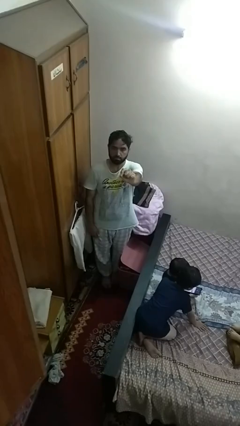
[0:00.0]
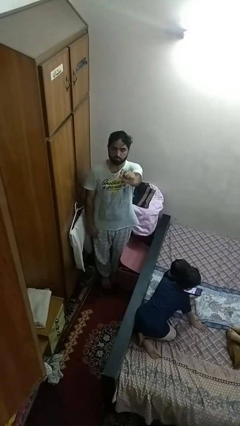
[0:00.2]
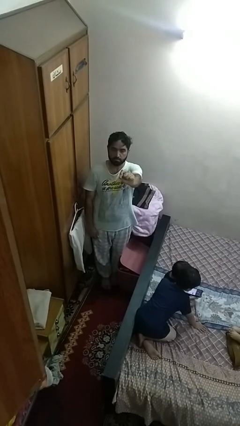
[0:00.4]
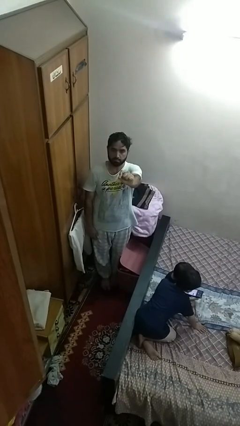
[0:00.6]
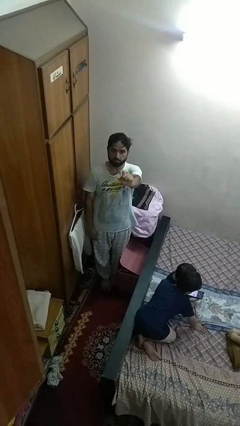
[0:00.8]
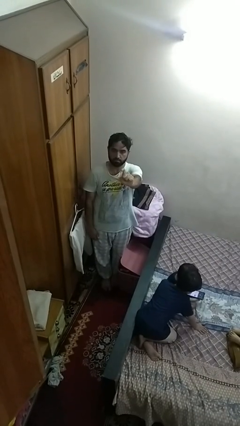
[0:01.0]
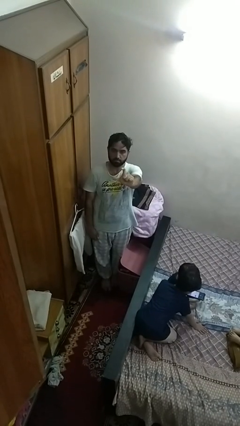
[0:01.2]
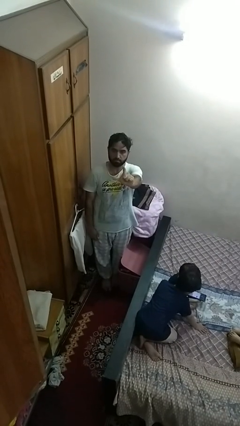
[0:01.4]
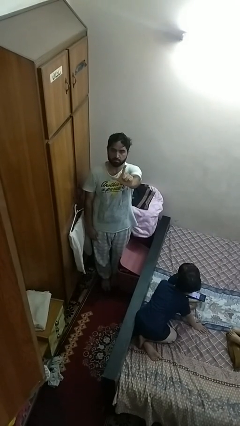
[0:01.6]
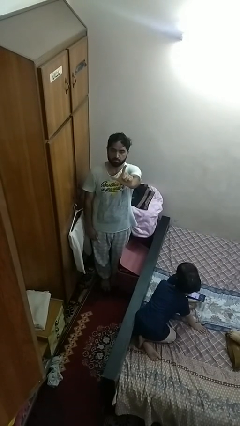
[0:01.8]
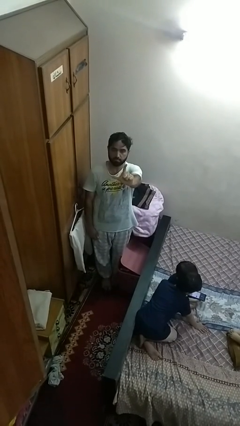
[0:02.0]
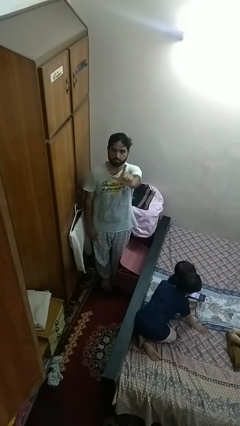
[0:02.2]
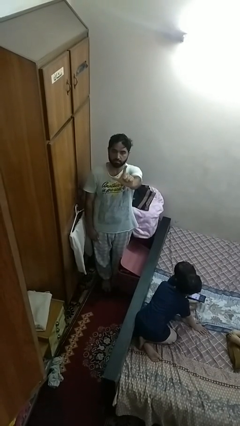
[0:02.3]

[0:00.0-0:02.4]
person gestures zoom out

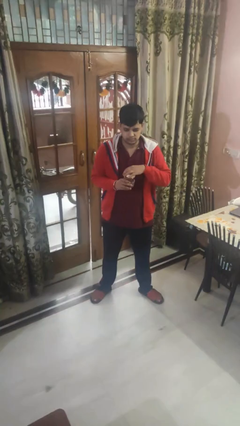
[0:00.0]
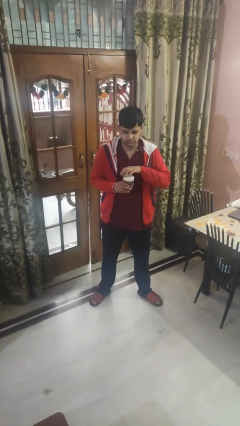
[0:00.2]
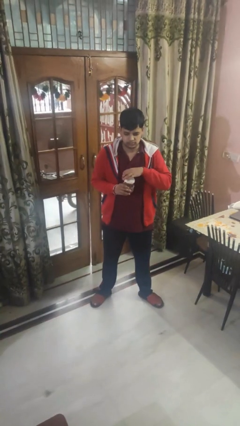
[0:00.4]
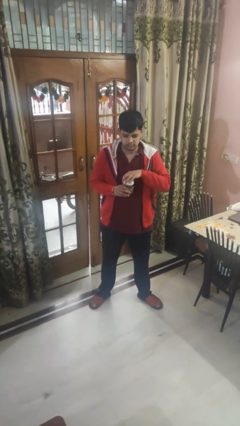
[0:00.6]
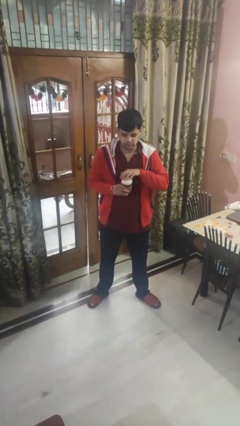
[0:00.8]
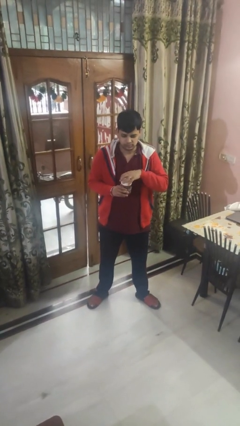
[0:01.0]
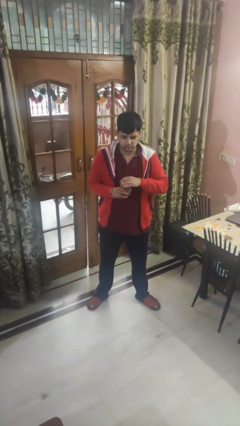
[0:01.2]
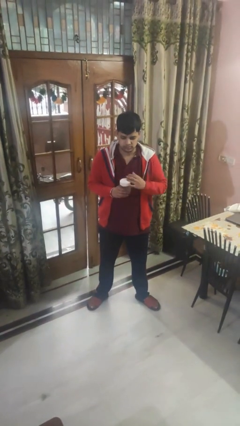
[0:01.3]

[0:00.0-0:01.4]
person closes jar

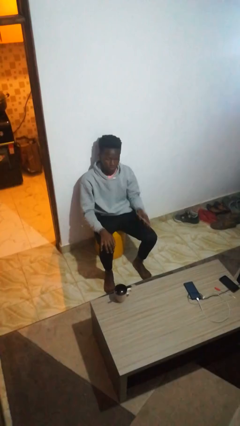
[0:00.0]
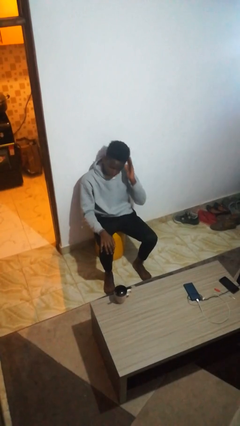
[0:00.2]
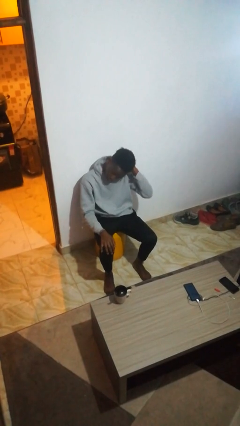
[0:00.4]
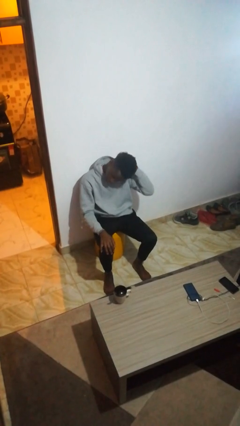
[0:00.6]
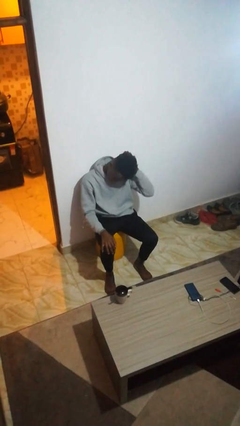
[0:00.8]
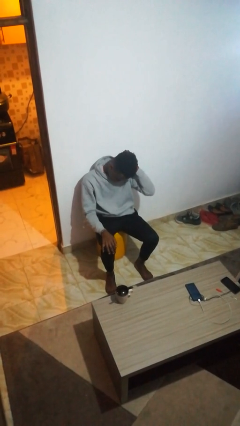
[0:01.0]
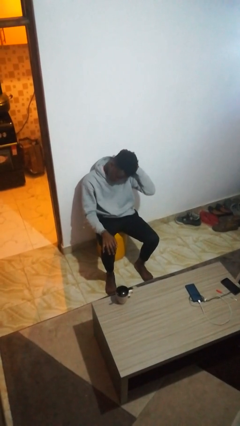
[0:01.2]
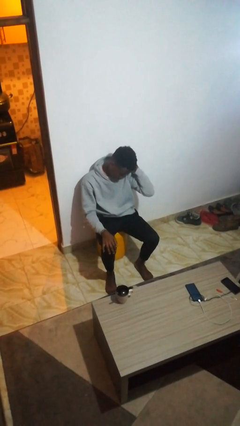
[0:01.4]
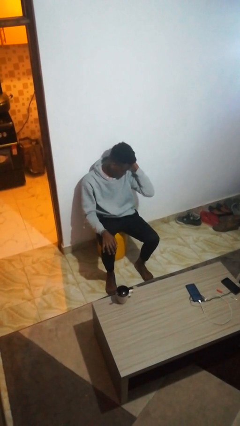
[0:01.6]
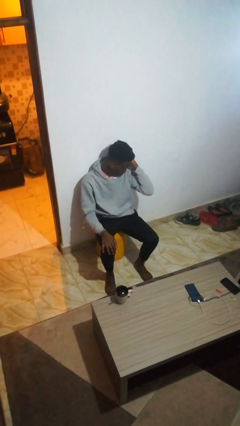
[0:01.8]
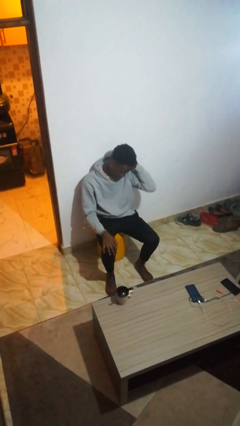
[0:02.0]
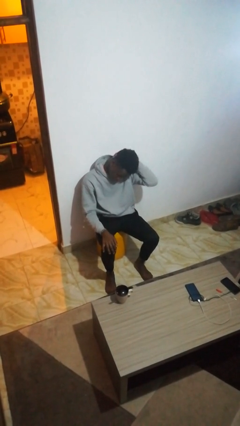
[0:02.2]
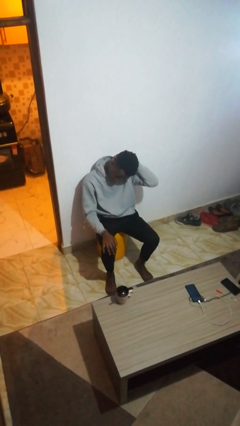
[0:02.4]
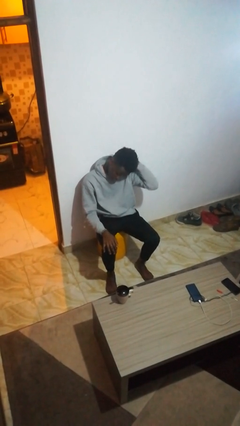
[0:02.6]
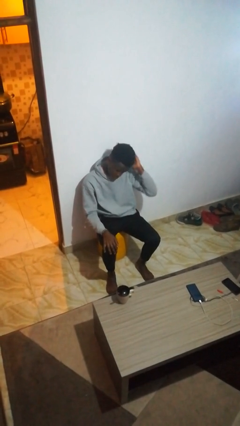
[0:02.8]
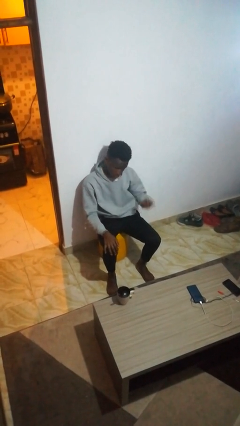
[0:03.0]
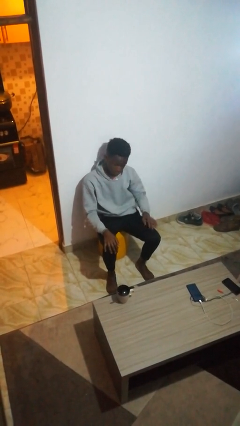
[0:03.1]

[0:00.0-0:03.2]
person strokes hair

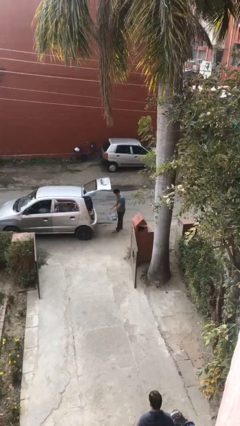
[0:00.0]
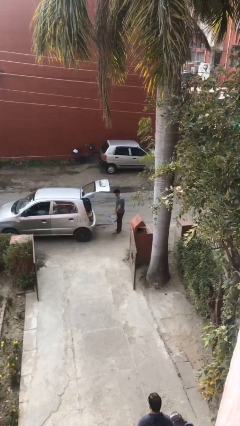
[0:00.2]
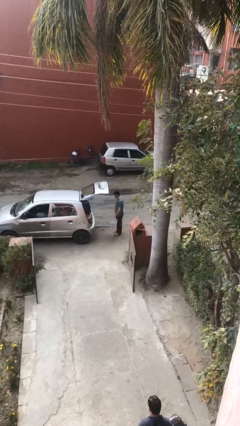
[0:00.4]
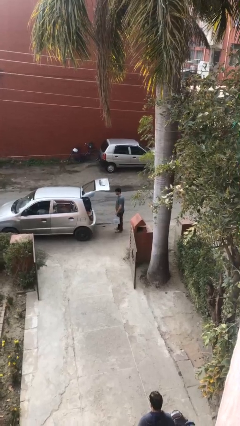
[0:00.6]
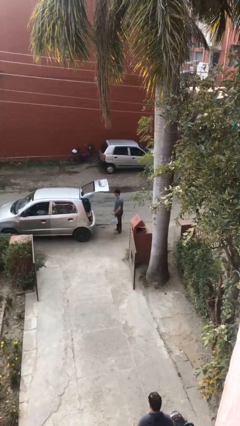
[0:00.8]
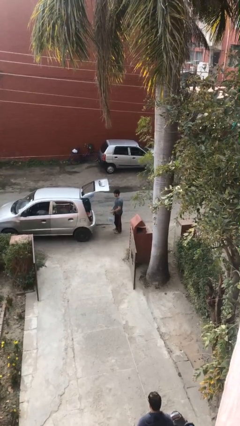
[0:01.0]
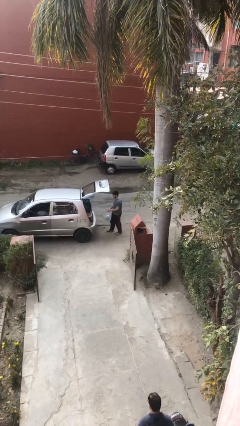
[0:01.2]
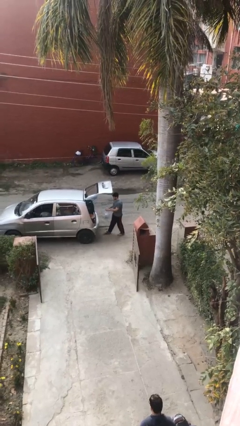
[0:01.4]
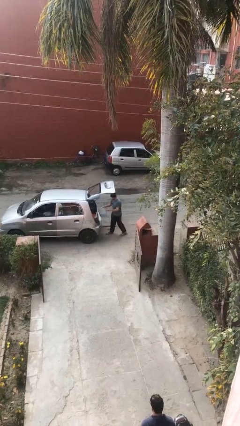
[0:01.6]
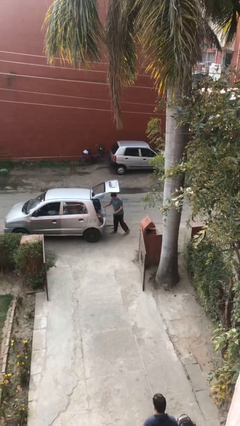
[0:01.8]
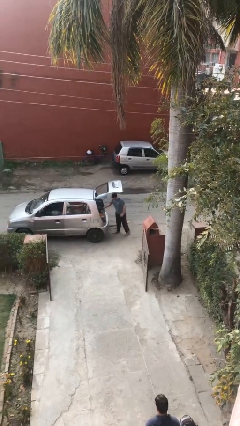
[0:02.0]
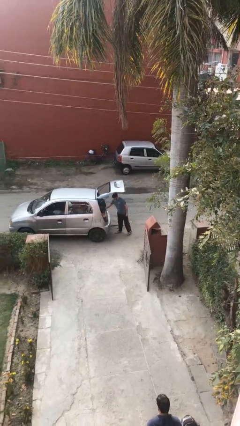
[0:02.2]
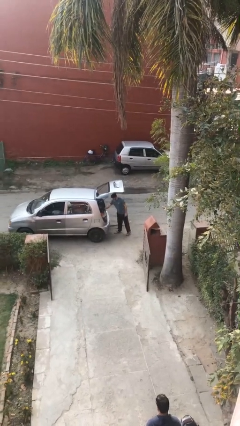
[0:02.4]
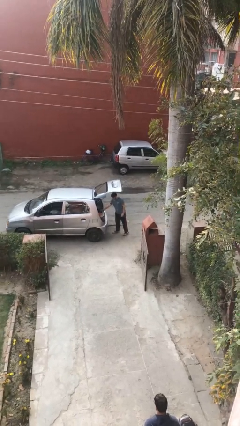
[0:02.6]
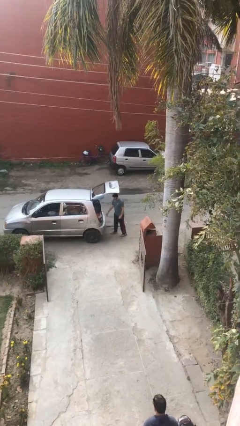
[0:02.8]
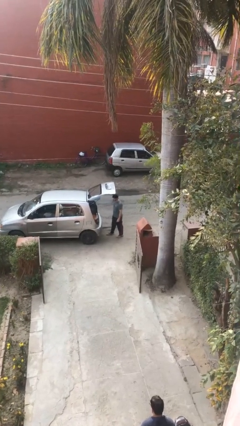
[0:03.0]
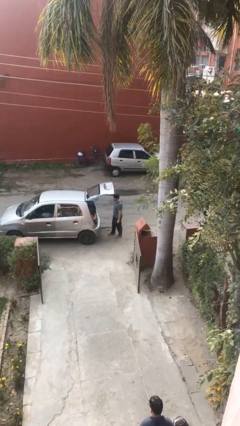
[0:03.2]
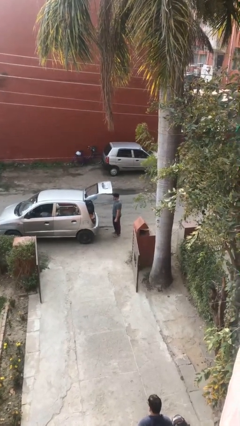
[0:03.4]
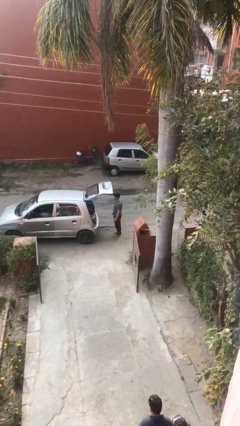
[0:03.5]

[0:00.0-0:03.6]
person loads car

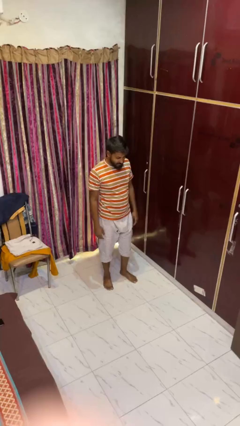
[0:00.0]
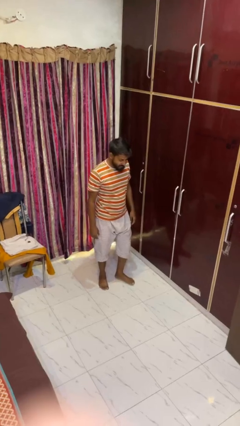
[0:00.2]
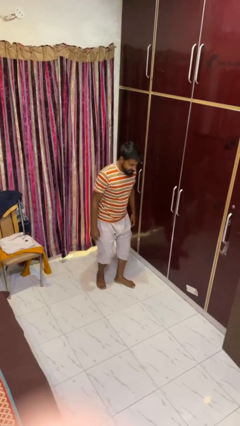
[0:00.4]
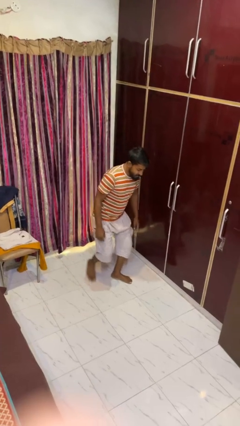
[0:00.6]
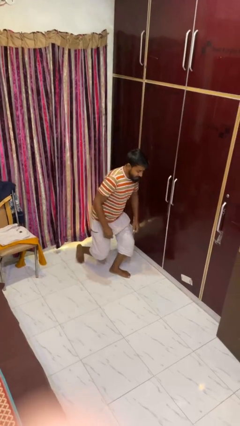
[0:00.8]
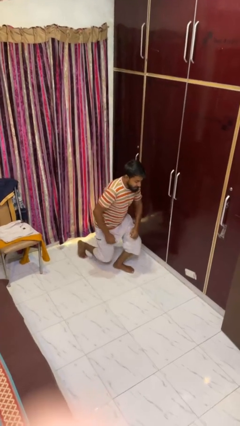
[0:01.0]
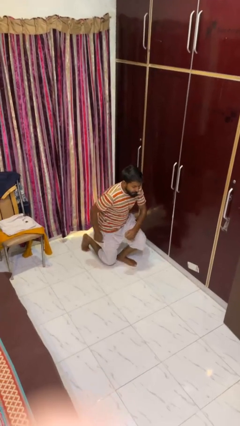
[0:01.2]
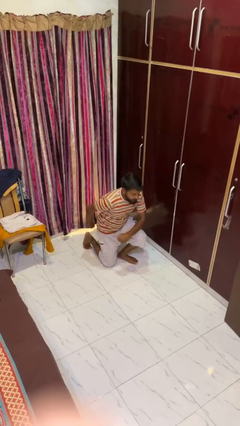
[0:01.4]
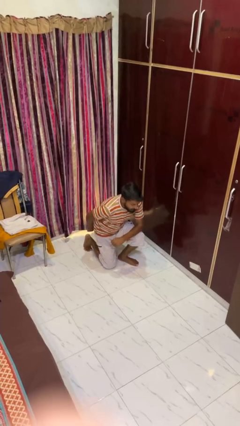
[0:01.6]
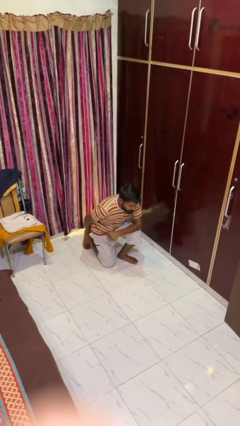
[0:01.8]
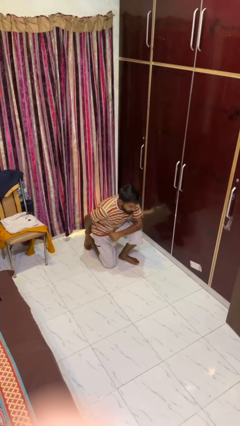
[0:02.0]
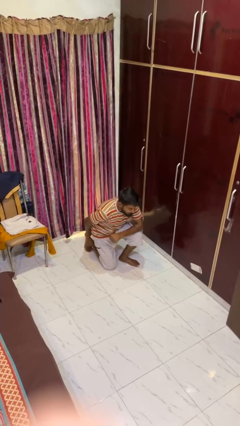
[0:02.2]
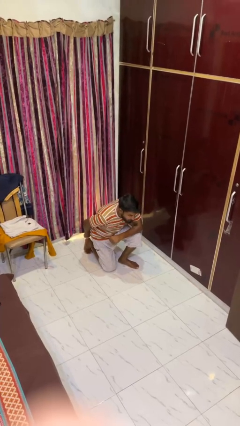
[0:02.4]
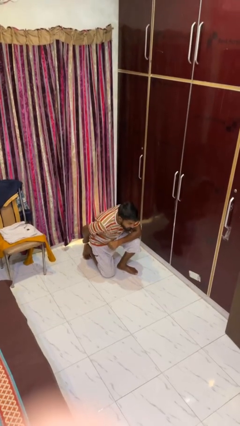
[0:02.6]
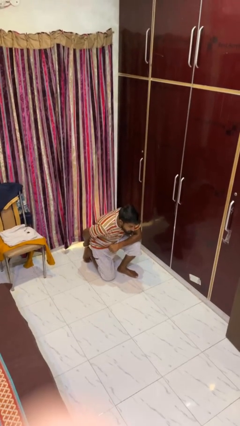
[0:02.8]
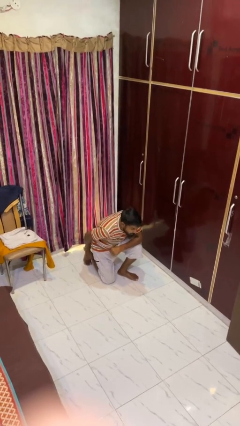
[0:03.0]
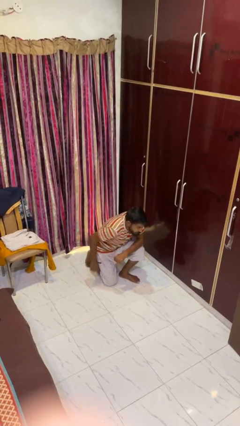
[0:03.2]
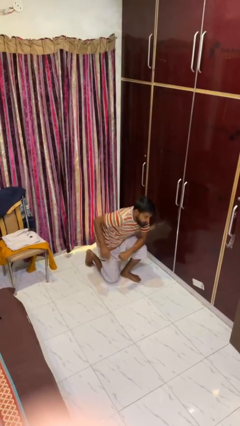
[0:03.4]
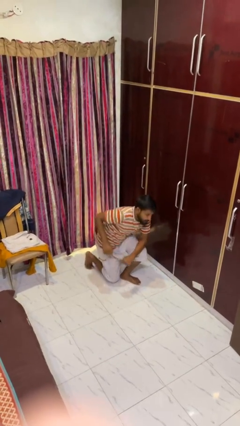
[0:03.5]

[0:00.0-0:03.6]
person kneels

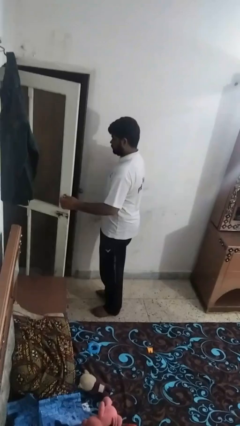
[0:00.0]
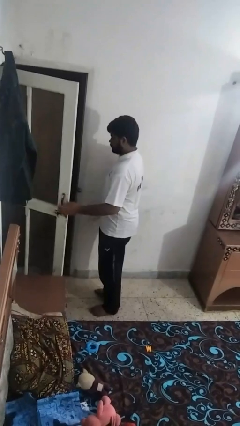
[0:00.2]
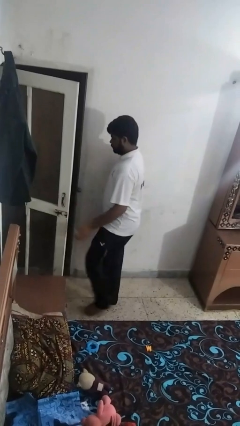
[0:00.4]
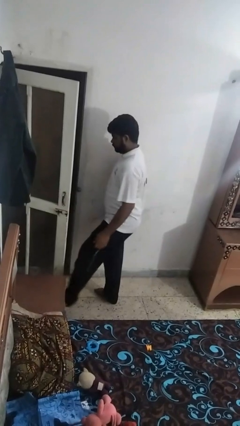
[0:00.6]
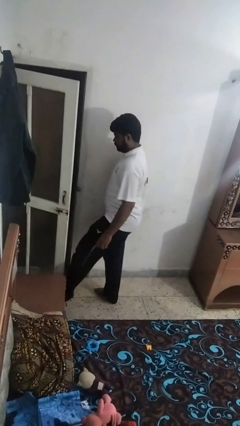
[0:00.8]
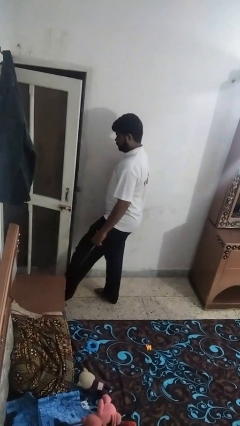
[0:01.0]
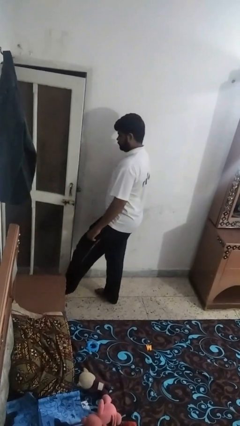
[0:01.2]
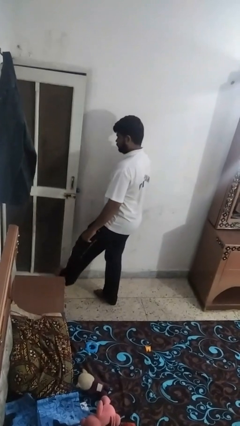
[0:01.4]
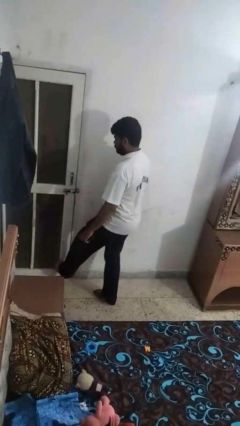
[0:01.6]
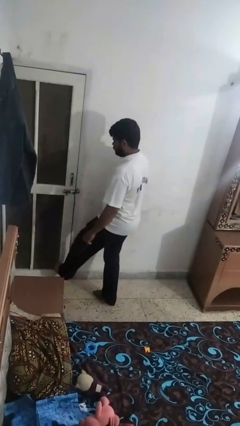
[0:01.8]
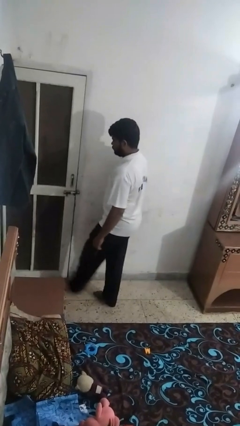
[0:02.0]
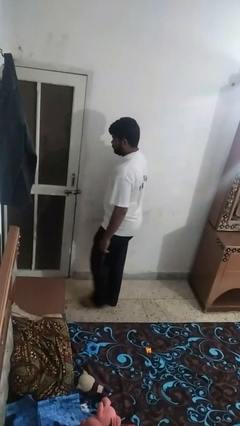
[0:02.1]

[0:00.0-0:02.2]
person closes door with foot

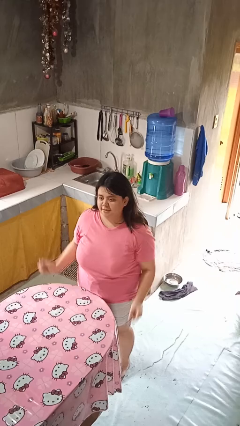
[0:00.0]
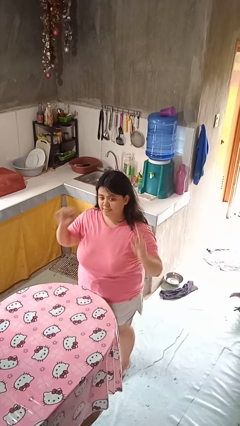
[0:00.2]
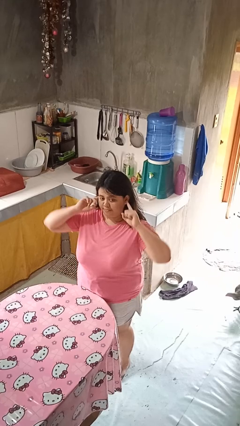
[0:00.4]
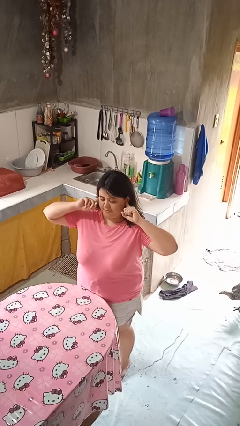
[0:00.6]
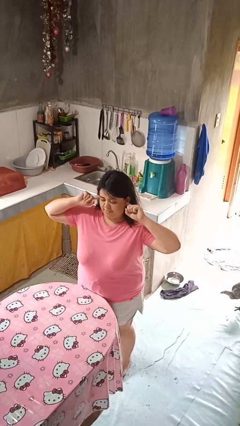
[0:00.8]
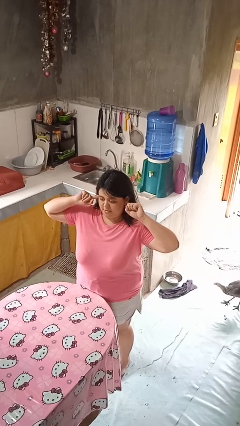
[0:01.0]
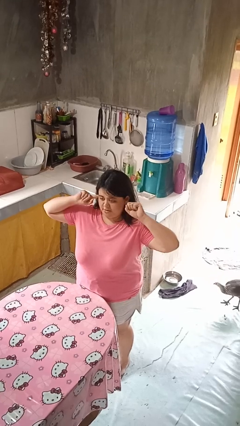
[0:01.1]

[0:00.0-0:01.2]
person puts fingers in ear
